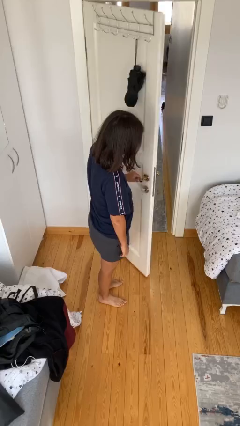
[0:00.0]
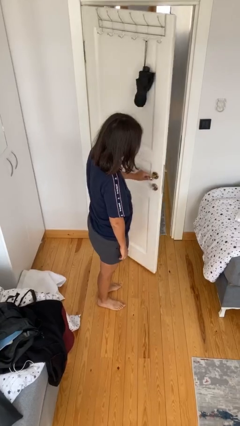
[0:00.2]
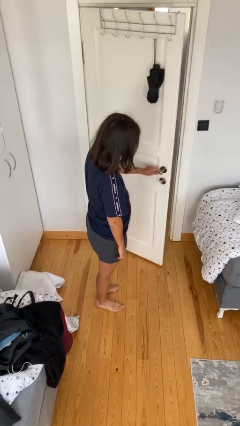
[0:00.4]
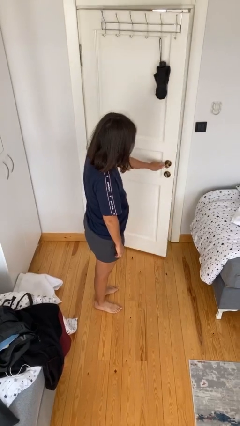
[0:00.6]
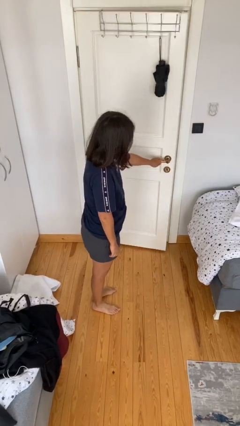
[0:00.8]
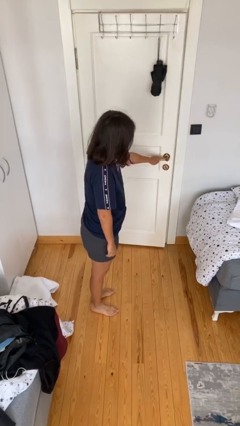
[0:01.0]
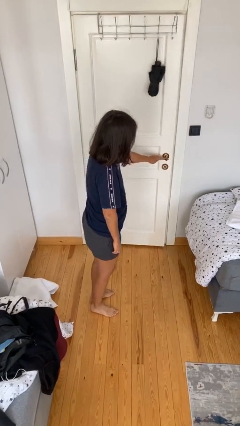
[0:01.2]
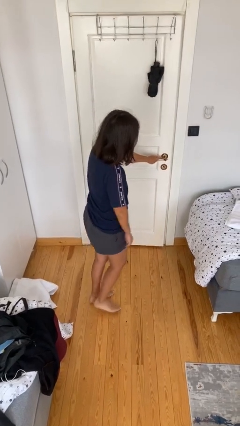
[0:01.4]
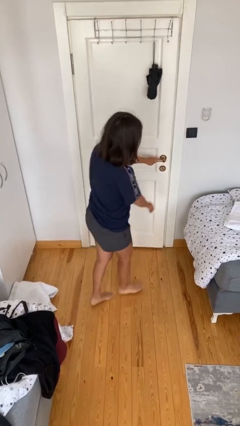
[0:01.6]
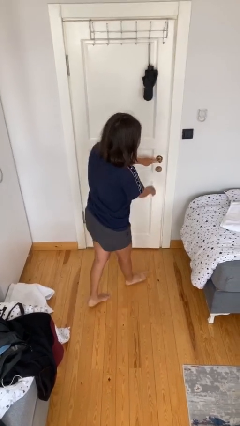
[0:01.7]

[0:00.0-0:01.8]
person closes facility door

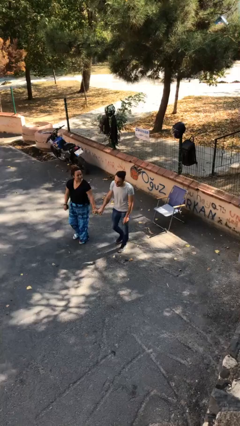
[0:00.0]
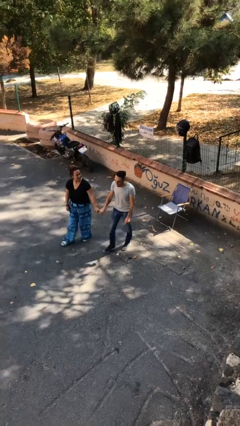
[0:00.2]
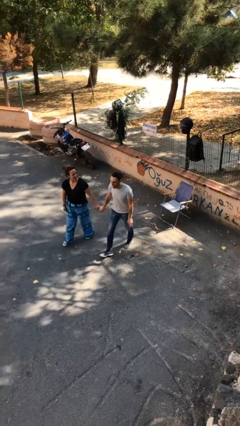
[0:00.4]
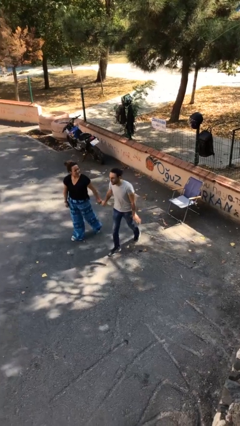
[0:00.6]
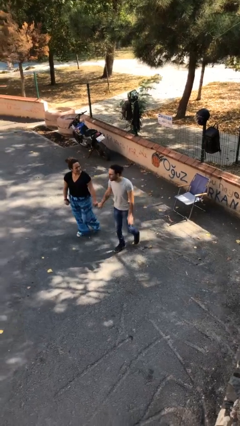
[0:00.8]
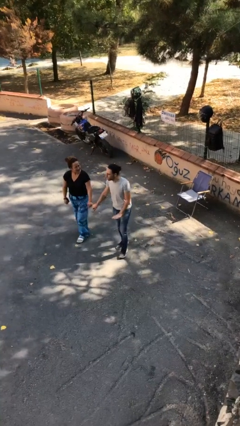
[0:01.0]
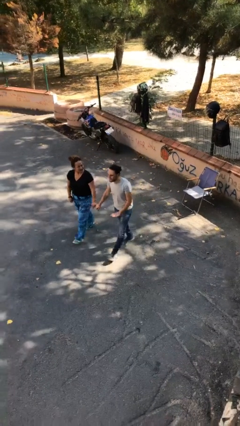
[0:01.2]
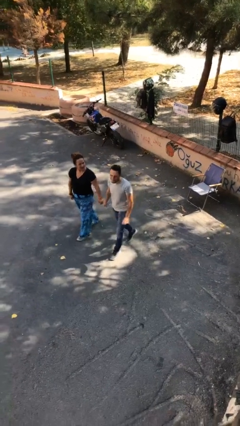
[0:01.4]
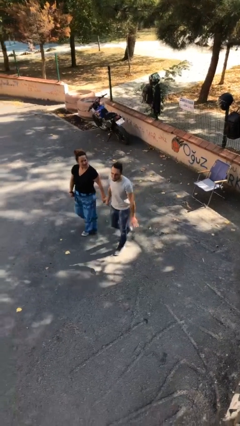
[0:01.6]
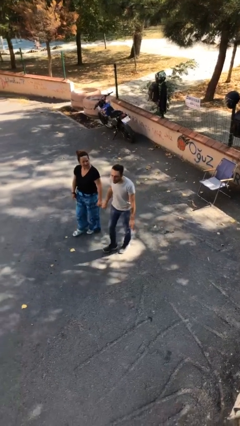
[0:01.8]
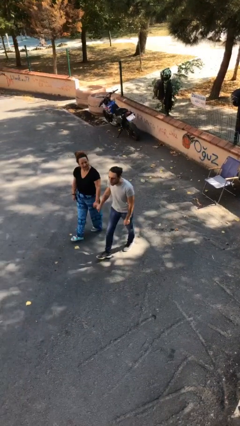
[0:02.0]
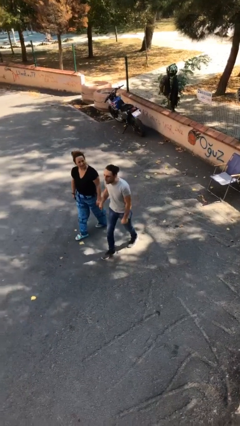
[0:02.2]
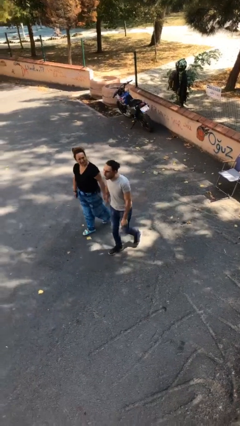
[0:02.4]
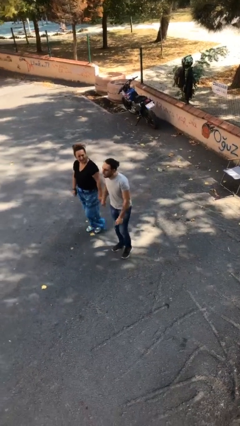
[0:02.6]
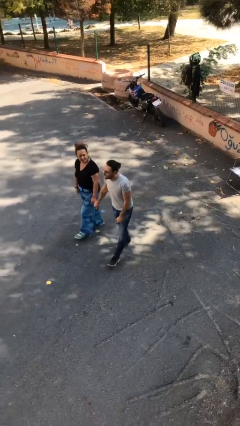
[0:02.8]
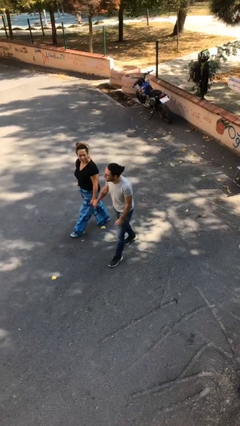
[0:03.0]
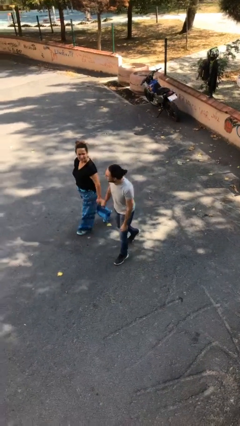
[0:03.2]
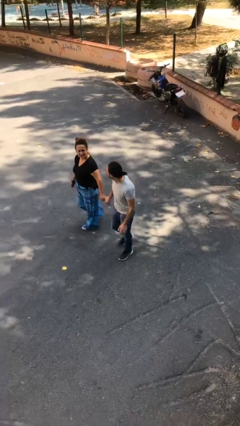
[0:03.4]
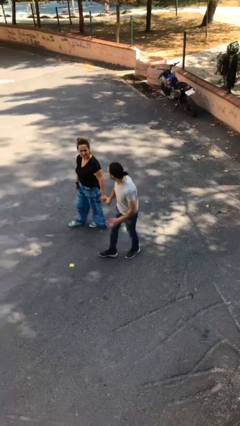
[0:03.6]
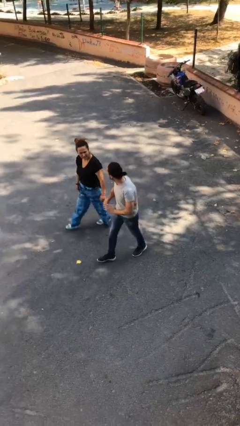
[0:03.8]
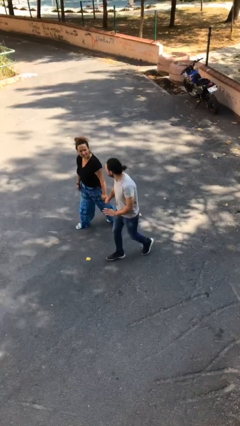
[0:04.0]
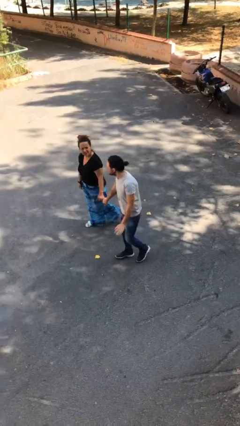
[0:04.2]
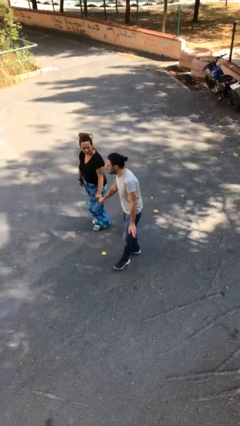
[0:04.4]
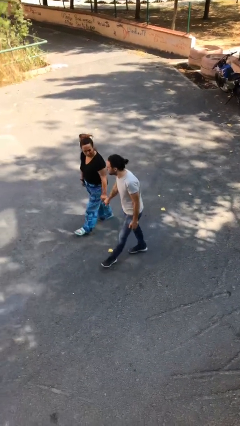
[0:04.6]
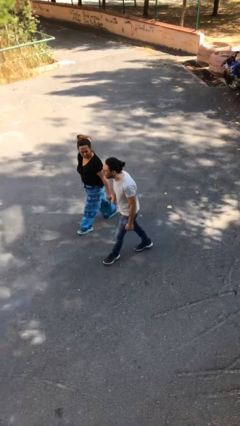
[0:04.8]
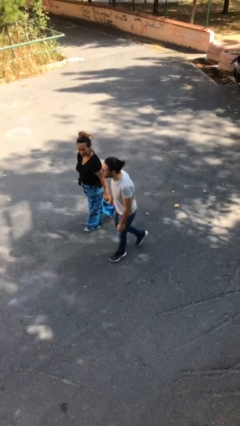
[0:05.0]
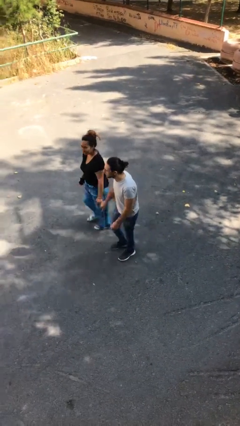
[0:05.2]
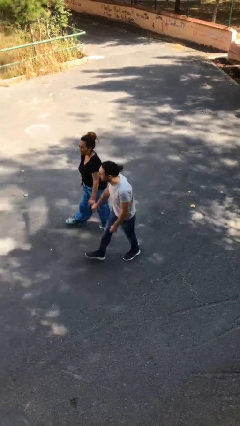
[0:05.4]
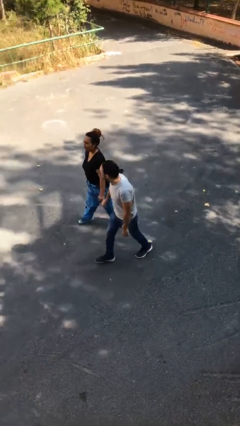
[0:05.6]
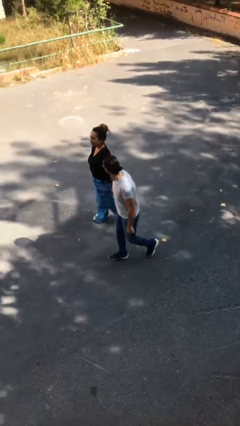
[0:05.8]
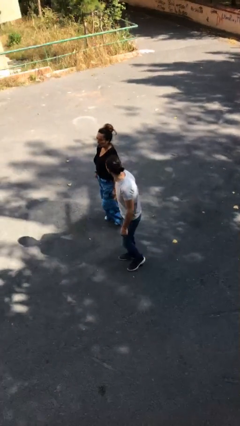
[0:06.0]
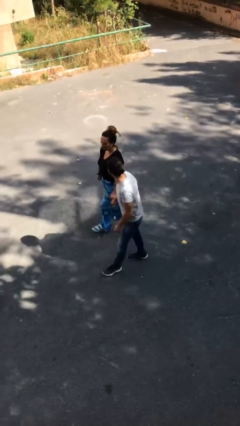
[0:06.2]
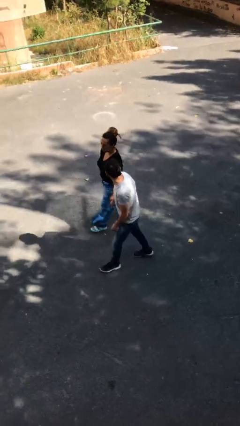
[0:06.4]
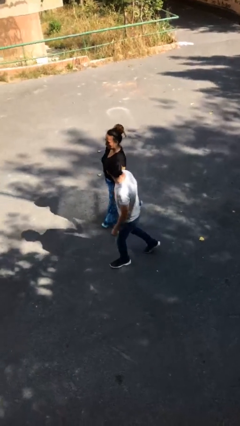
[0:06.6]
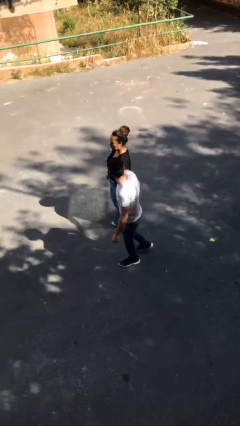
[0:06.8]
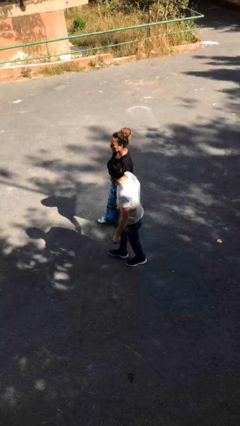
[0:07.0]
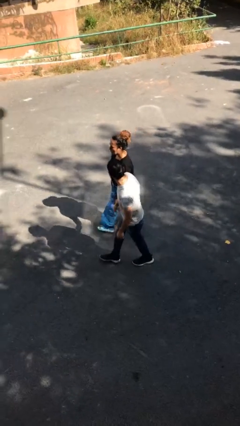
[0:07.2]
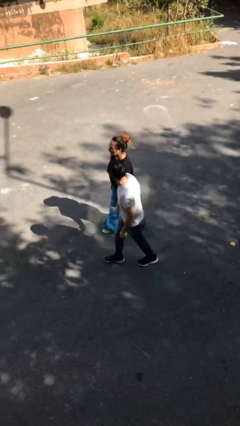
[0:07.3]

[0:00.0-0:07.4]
person holds hand

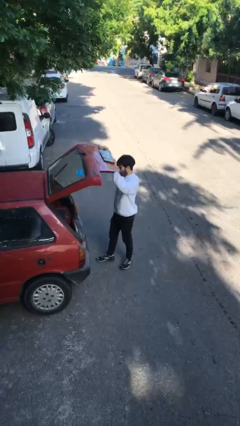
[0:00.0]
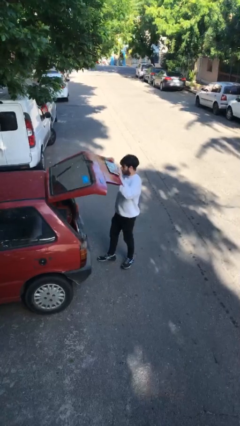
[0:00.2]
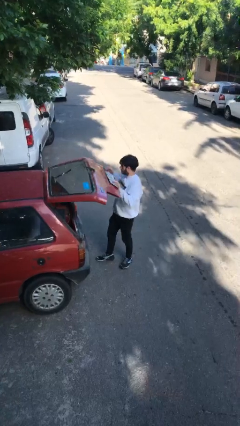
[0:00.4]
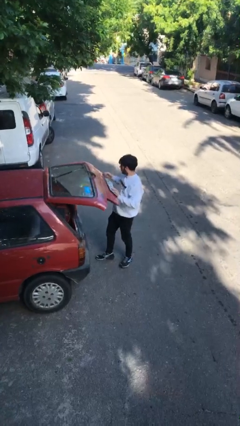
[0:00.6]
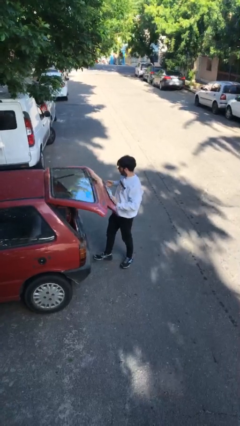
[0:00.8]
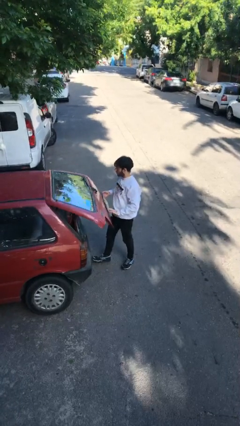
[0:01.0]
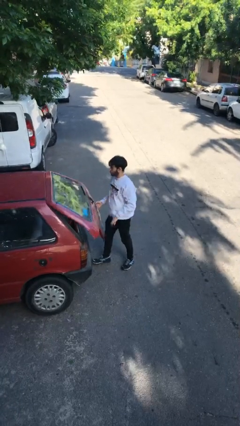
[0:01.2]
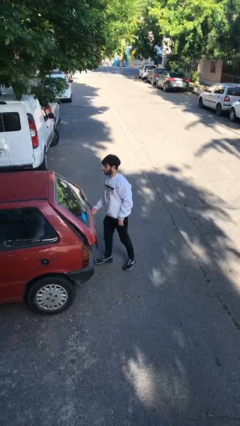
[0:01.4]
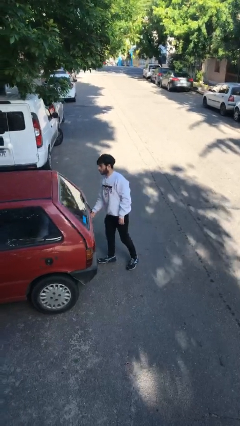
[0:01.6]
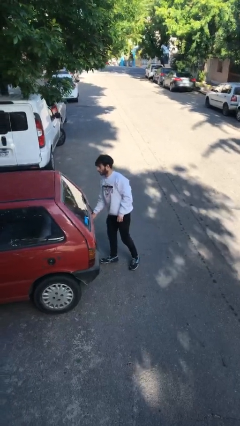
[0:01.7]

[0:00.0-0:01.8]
person closes car trunk

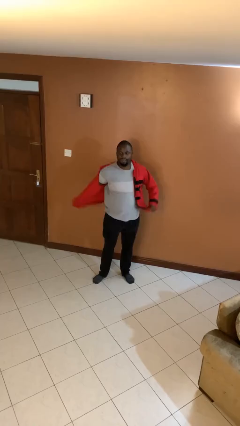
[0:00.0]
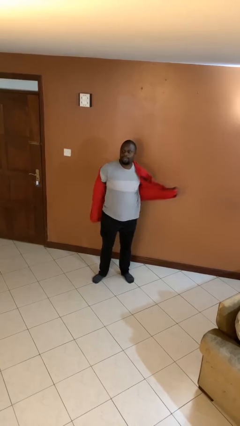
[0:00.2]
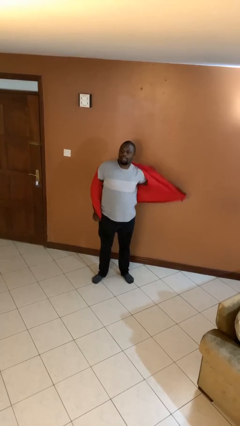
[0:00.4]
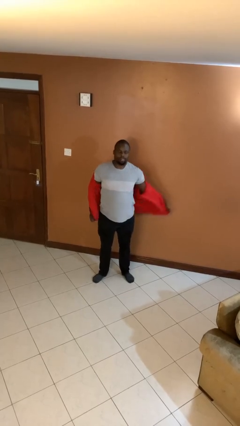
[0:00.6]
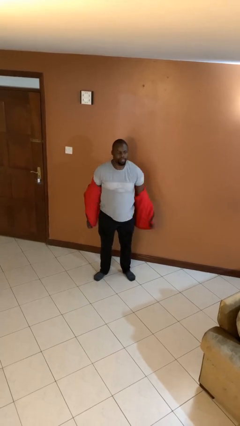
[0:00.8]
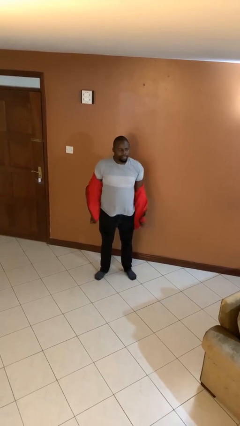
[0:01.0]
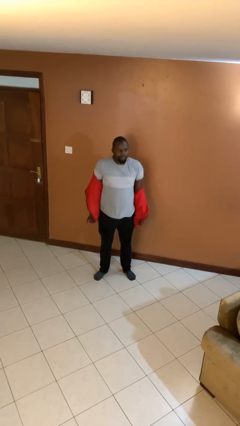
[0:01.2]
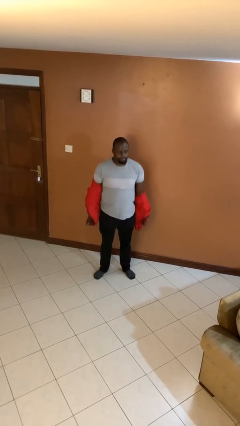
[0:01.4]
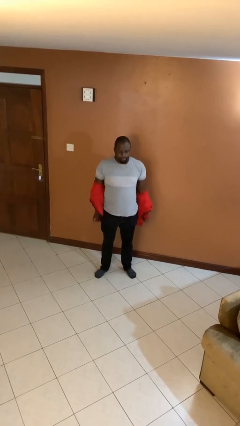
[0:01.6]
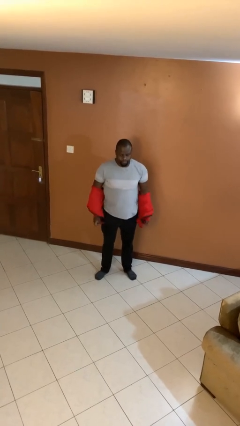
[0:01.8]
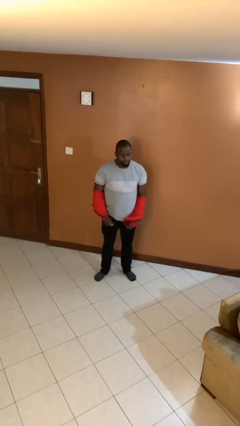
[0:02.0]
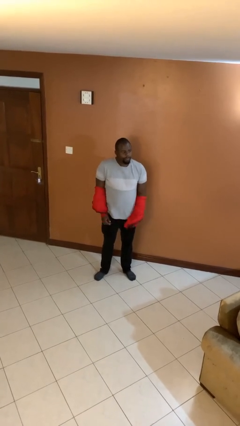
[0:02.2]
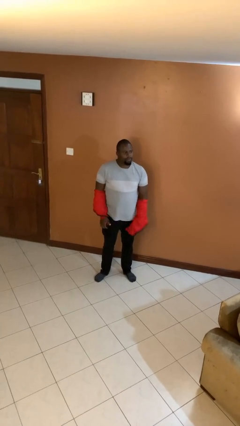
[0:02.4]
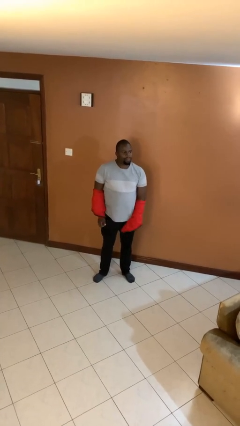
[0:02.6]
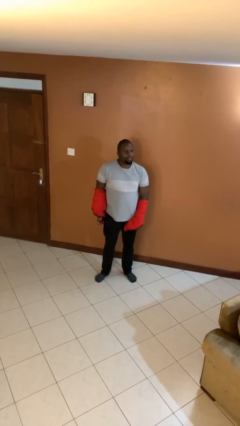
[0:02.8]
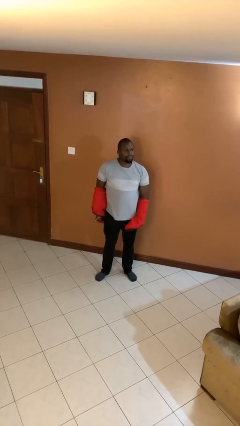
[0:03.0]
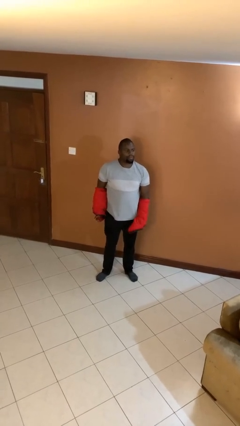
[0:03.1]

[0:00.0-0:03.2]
person takes off jacket

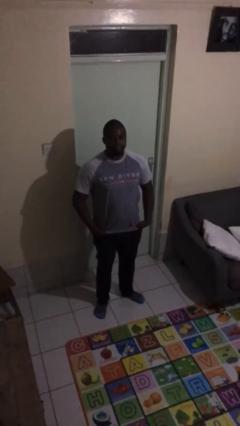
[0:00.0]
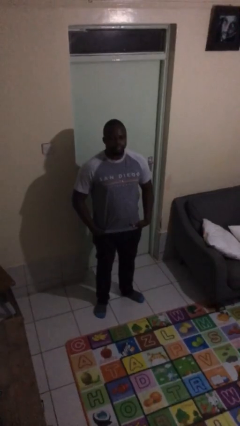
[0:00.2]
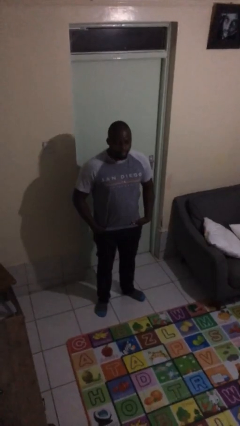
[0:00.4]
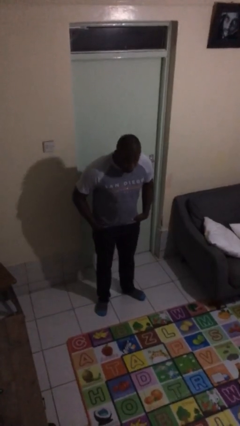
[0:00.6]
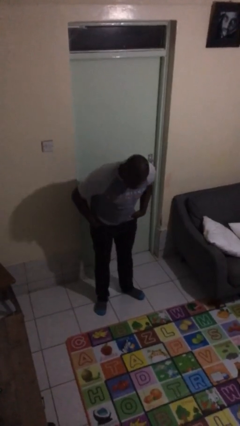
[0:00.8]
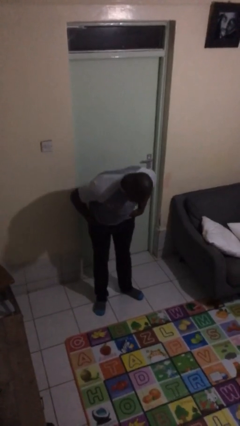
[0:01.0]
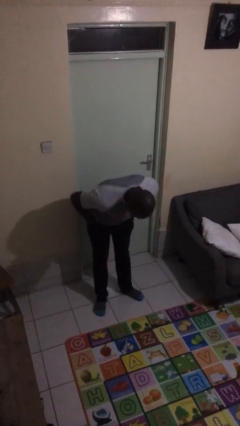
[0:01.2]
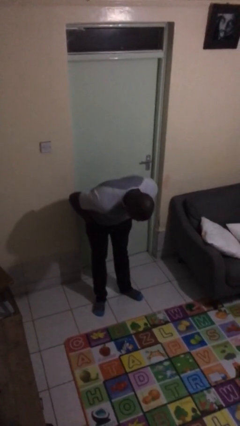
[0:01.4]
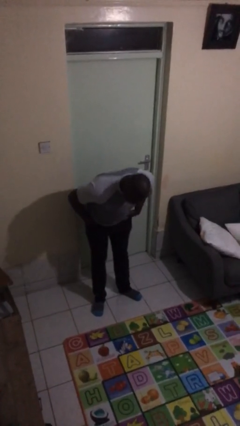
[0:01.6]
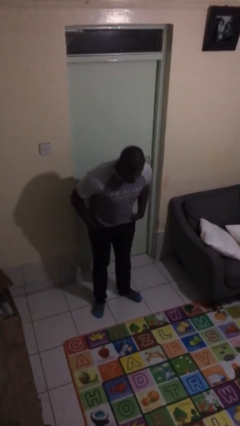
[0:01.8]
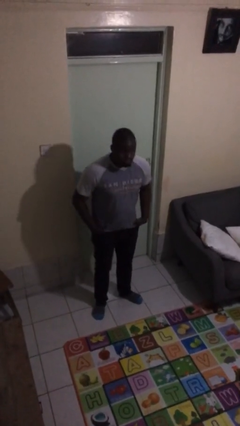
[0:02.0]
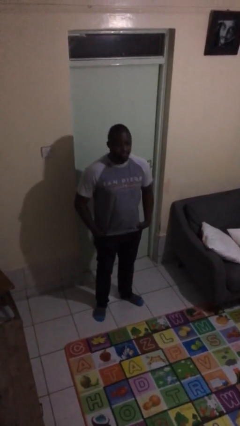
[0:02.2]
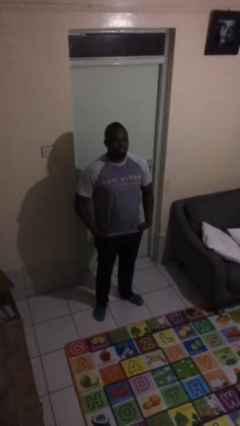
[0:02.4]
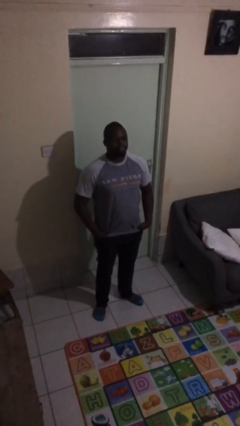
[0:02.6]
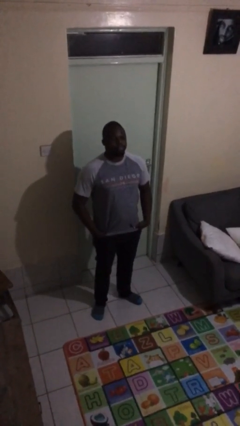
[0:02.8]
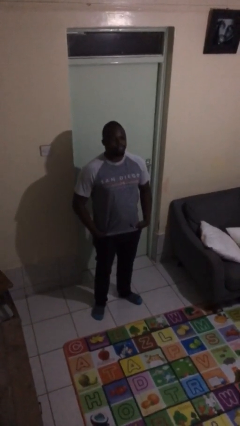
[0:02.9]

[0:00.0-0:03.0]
person bows

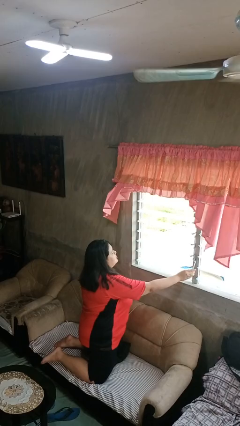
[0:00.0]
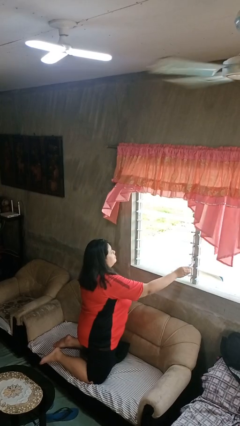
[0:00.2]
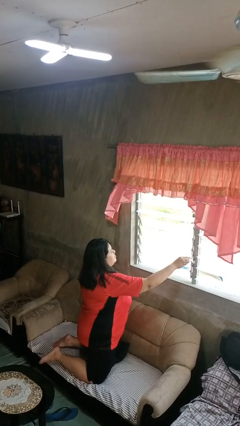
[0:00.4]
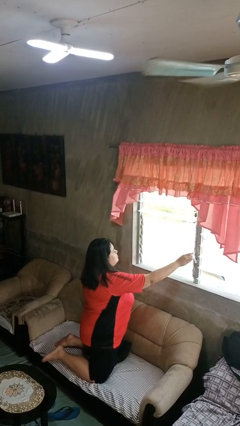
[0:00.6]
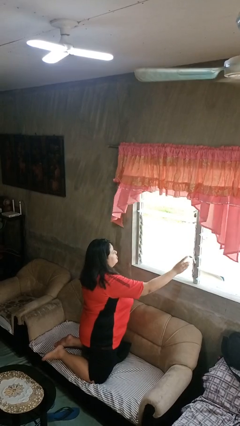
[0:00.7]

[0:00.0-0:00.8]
person closes home window
